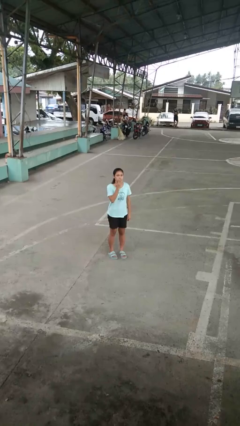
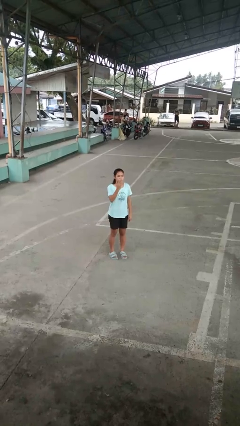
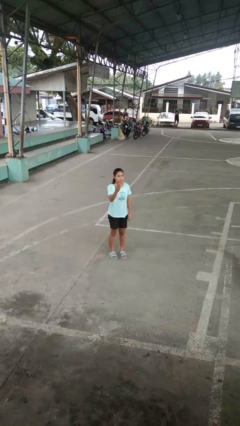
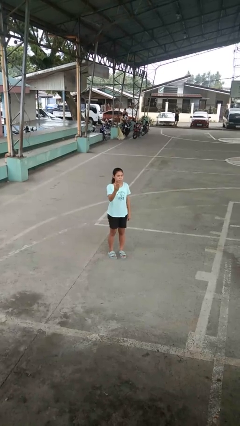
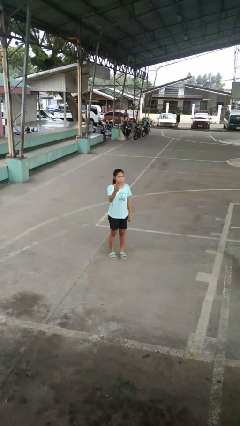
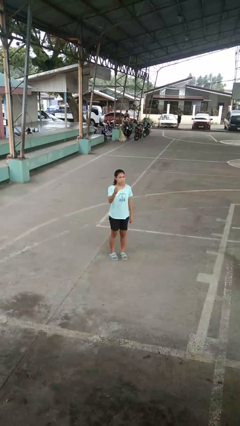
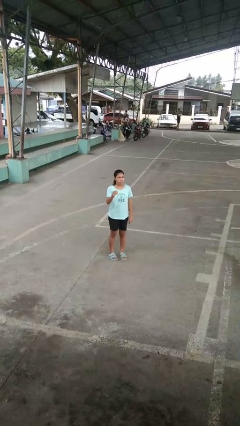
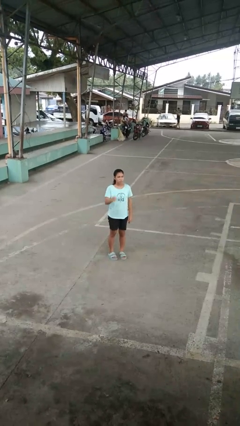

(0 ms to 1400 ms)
person gestures blow kiss

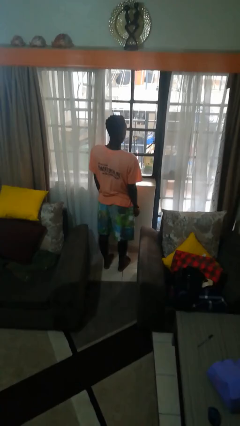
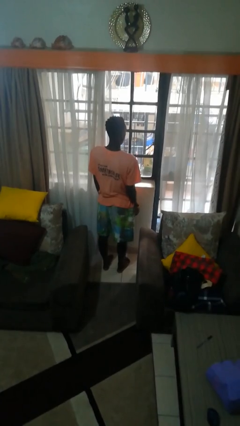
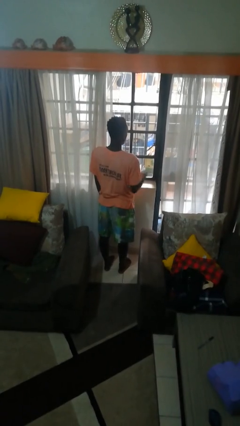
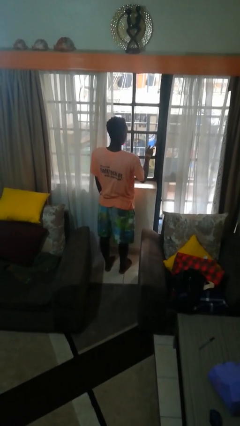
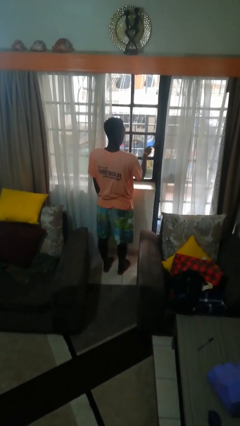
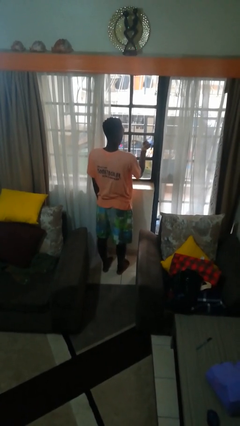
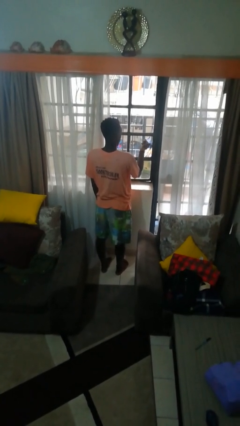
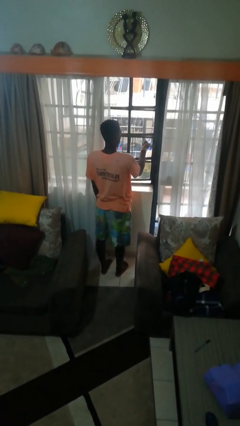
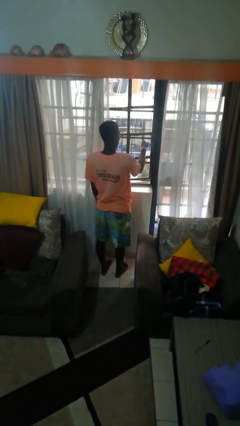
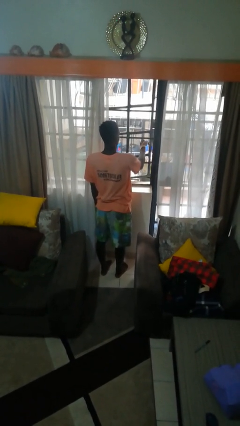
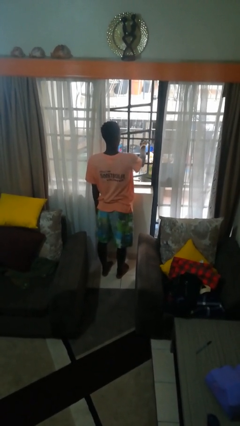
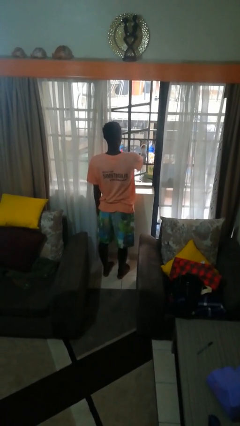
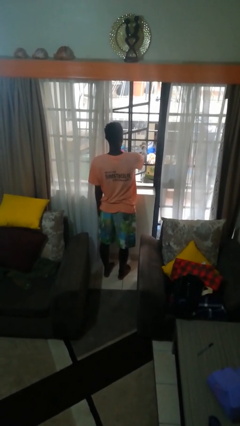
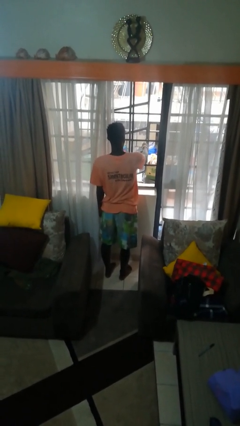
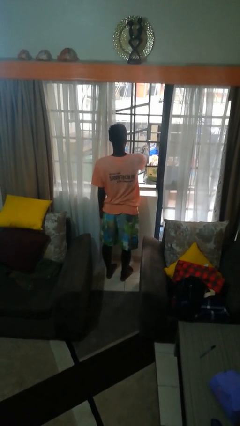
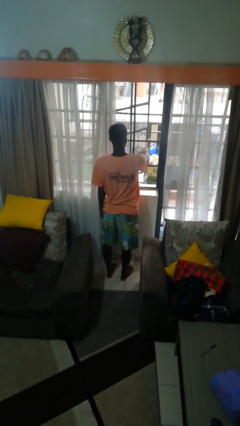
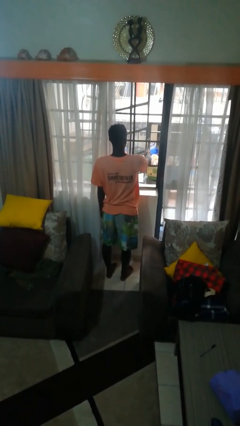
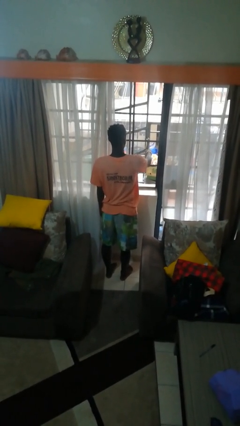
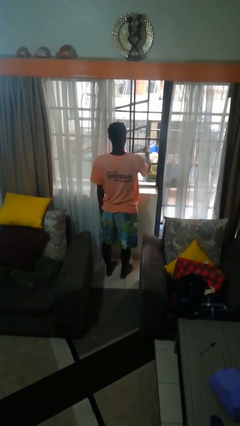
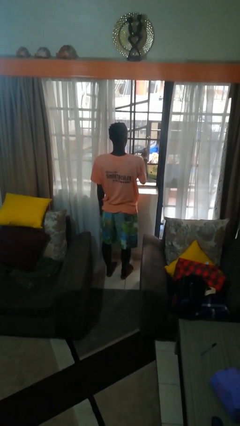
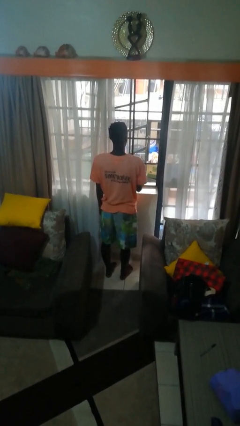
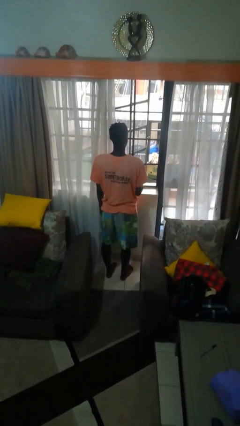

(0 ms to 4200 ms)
person opens home window

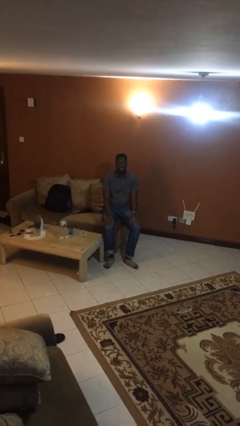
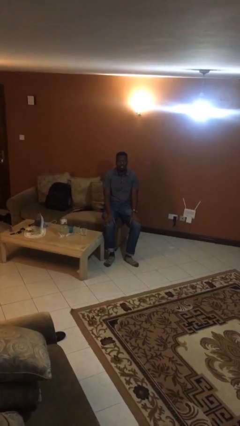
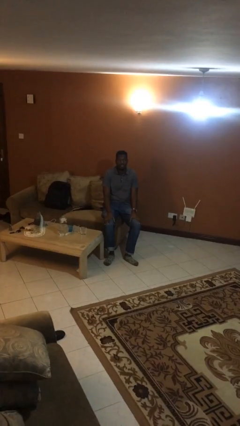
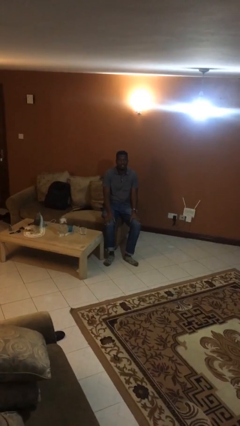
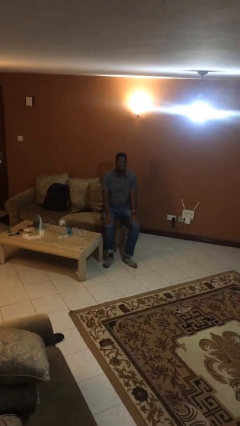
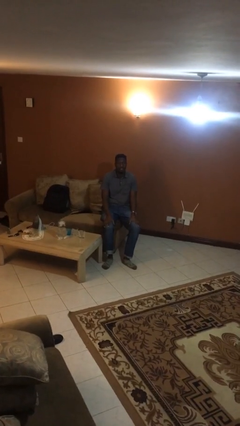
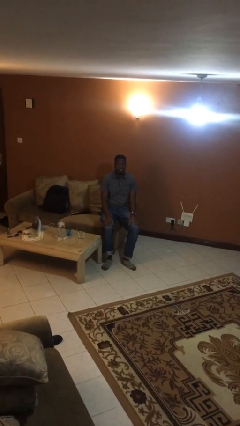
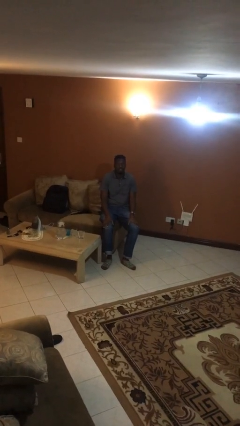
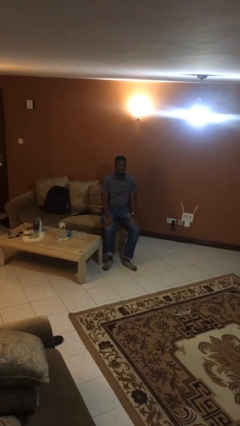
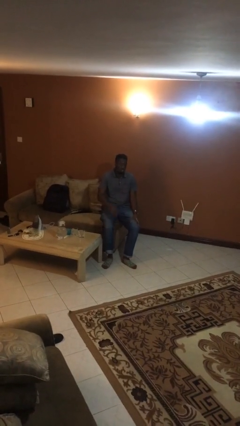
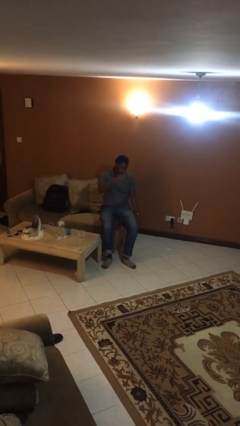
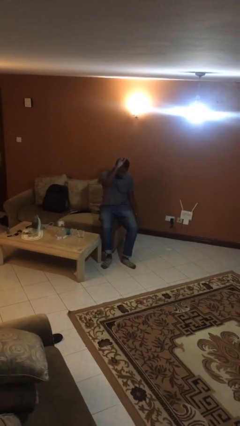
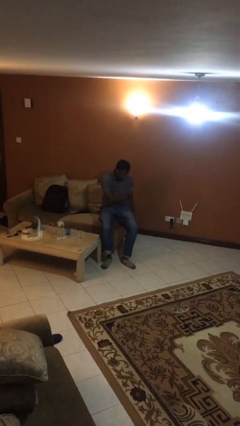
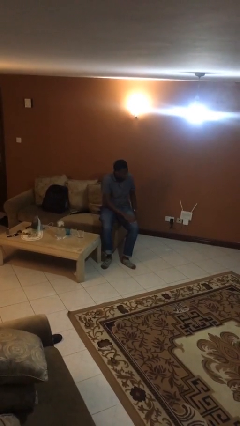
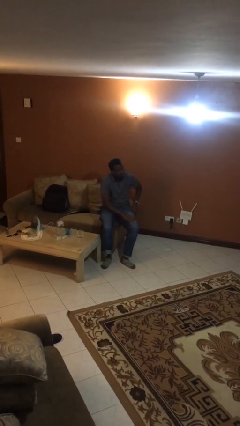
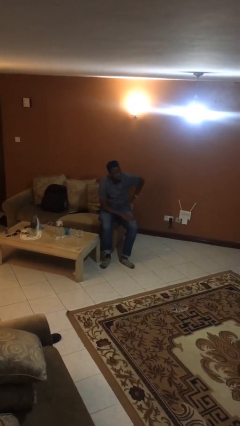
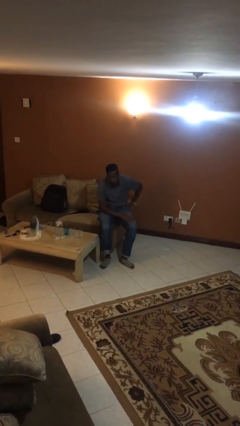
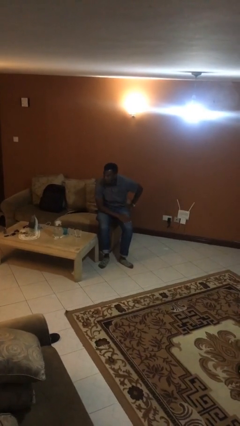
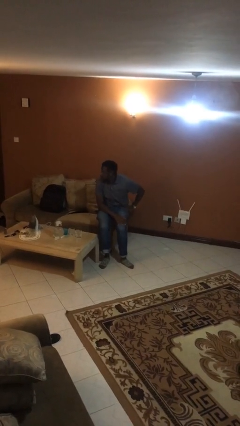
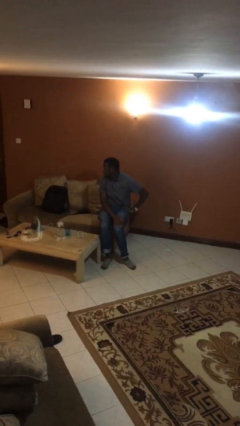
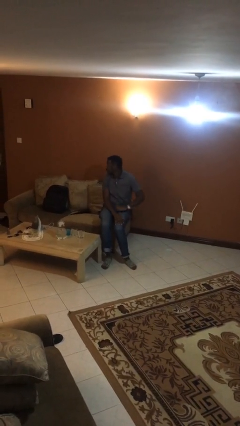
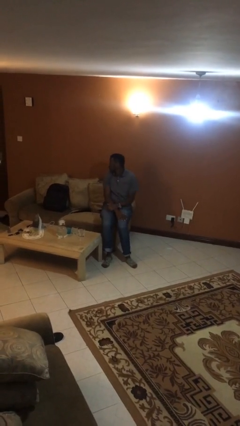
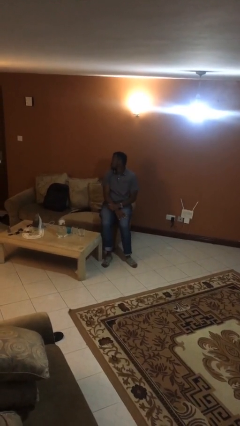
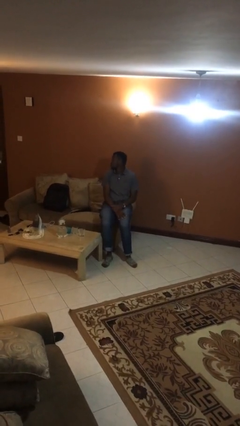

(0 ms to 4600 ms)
person slaps hands on thighs

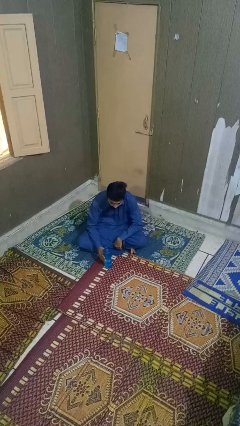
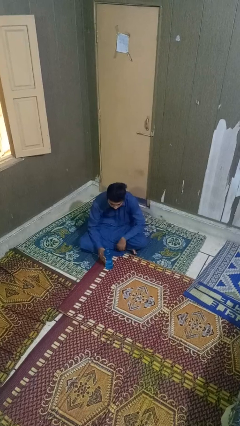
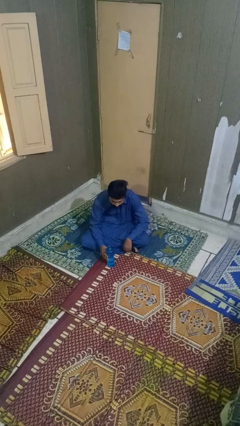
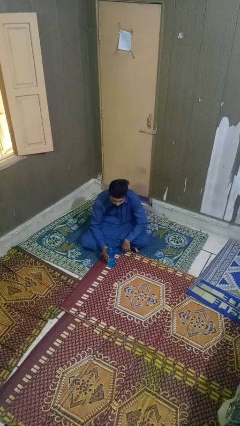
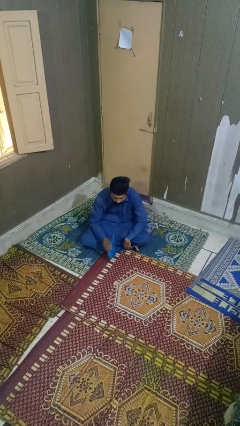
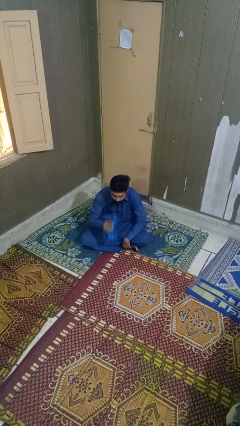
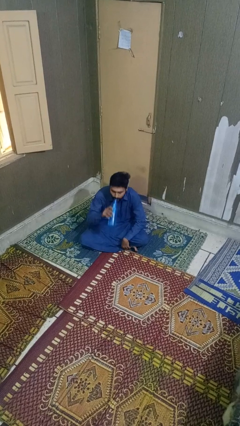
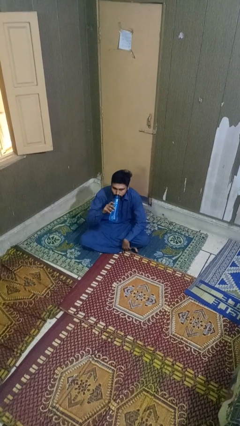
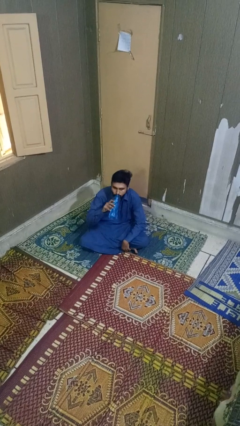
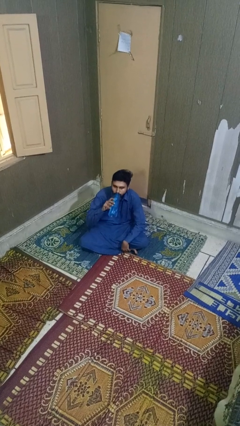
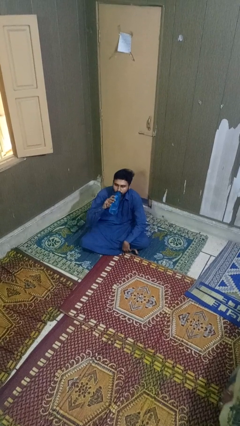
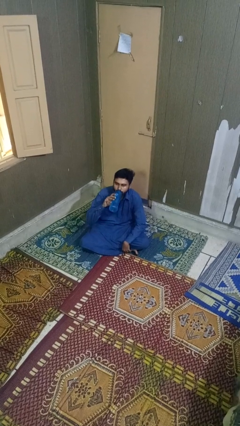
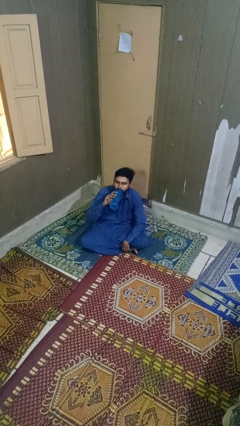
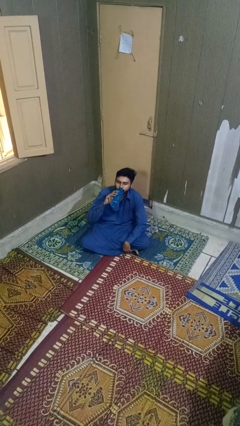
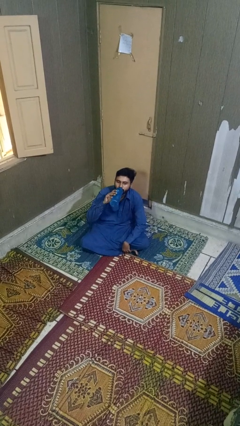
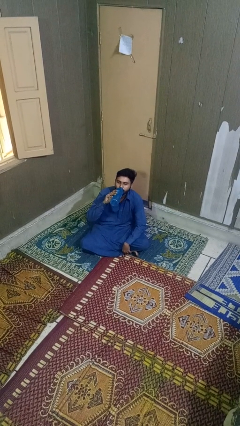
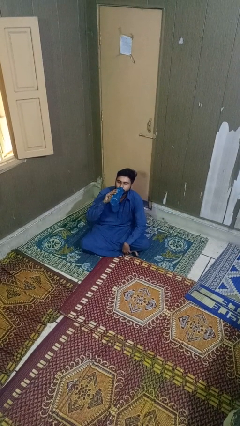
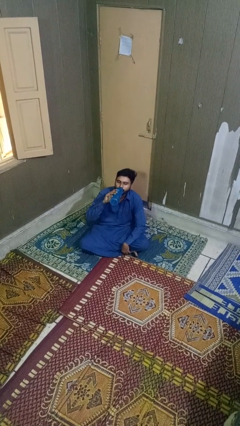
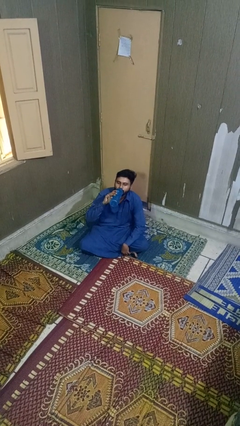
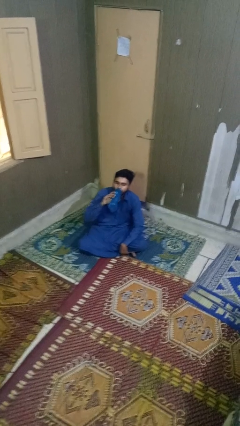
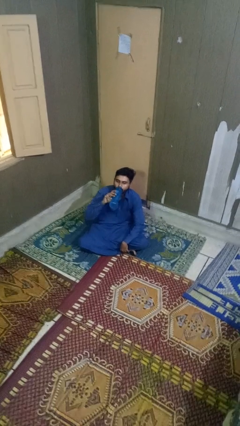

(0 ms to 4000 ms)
person drinks from bottle

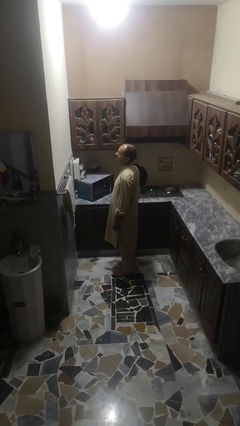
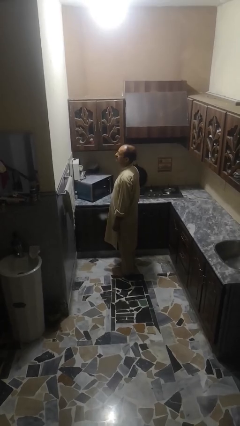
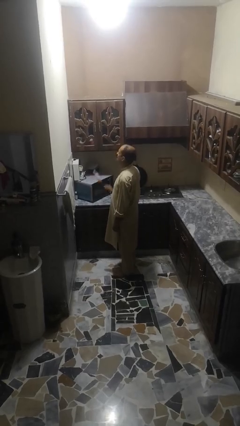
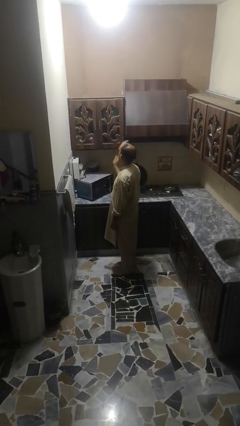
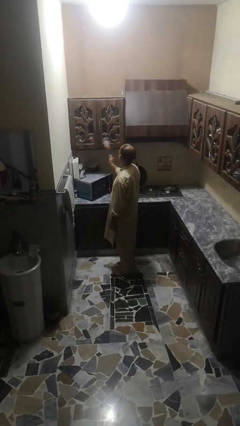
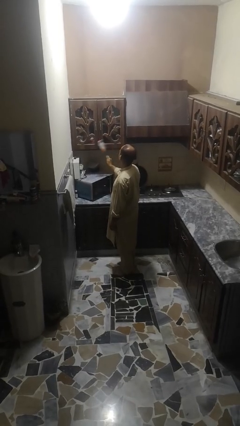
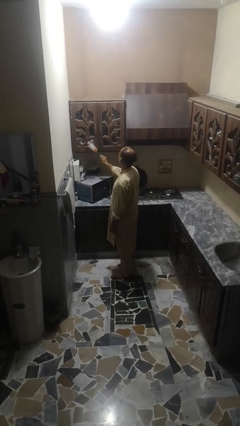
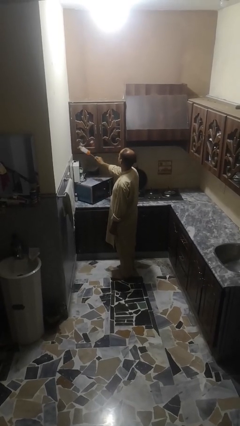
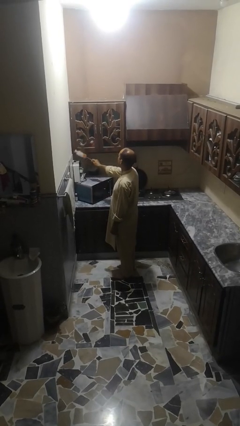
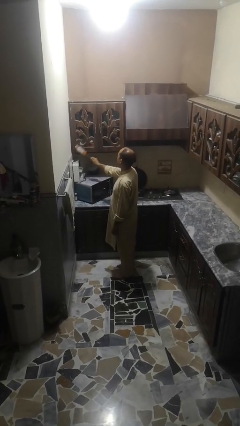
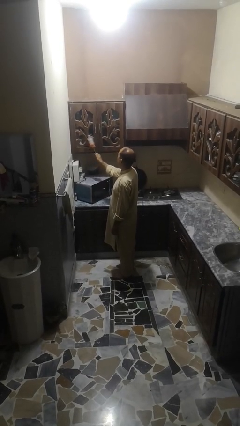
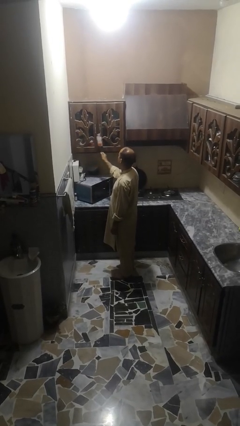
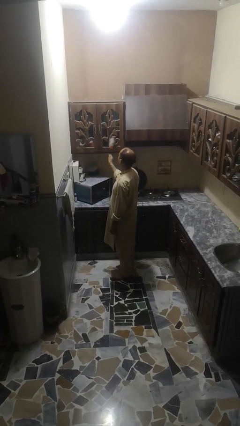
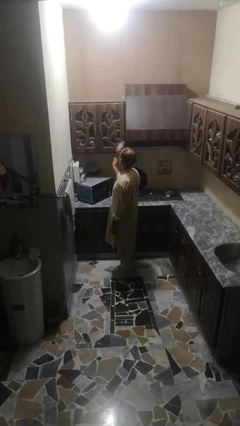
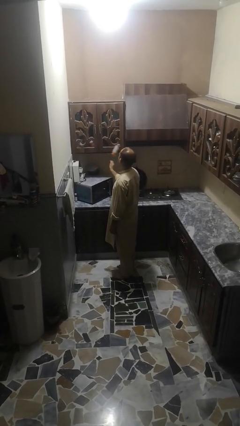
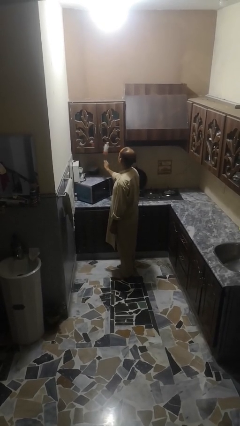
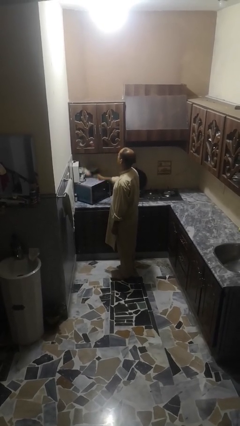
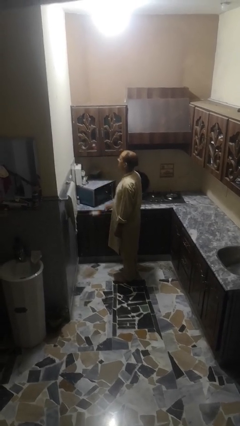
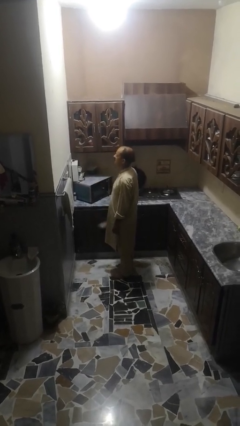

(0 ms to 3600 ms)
person dusts furniture
